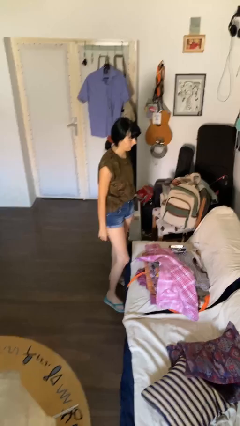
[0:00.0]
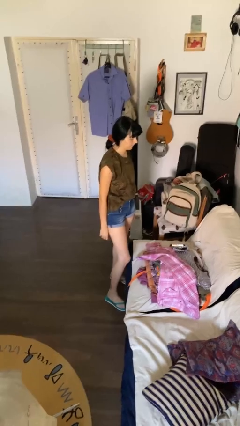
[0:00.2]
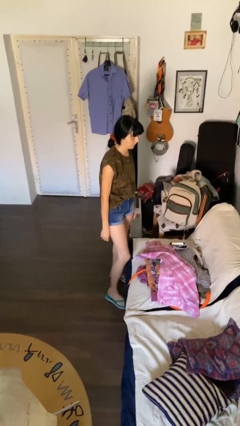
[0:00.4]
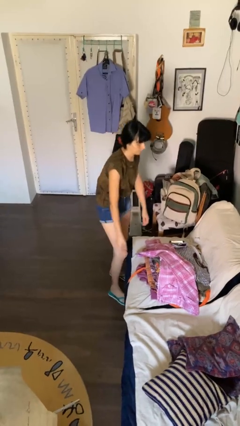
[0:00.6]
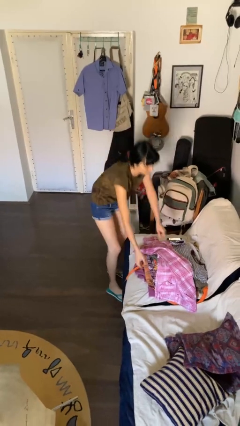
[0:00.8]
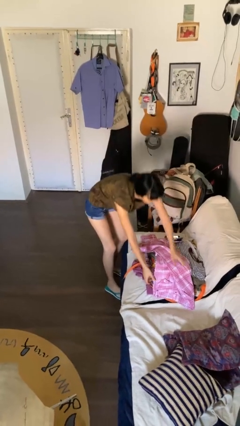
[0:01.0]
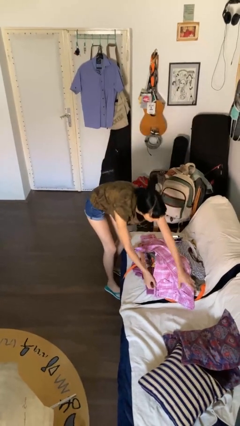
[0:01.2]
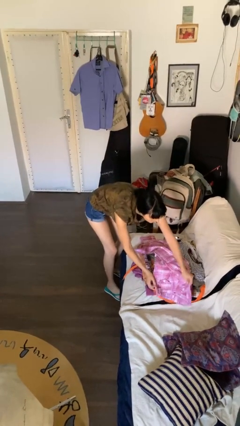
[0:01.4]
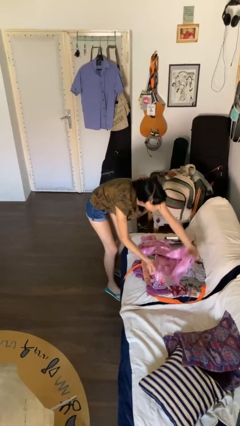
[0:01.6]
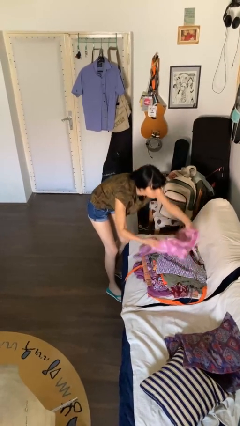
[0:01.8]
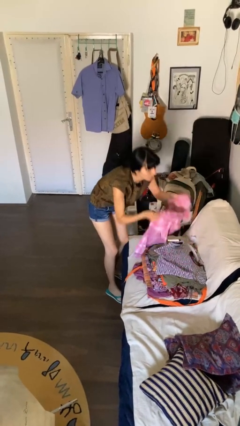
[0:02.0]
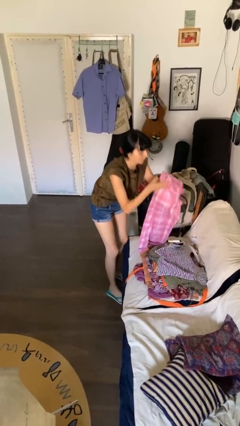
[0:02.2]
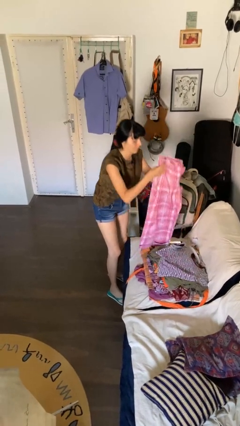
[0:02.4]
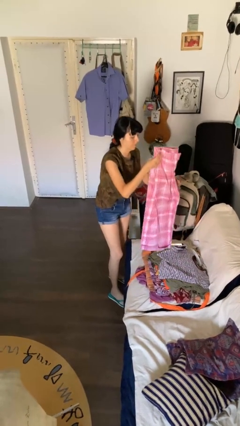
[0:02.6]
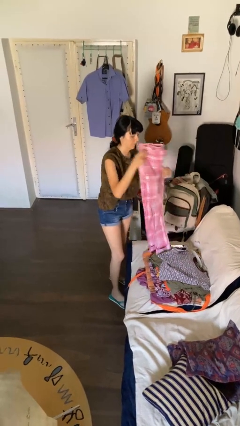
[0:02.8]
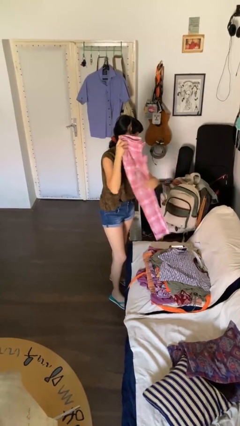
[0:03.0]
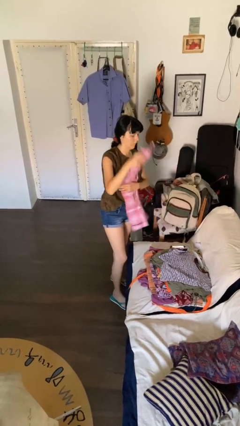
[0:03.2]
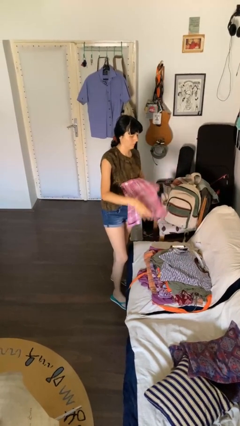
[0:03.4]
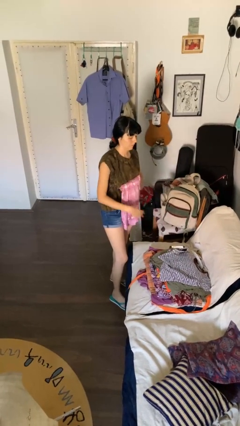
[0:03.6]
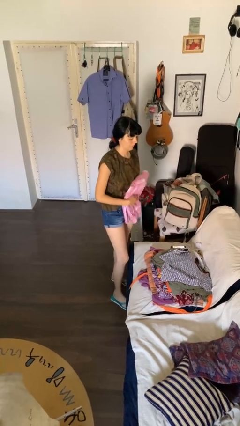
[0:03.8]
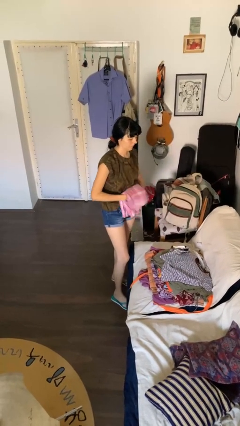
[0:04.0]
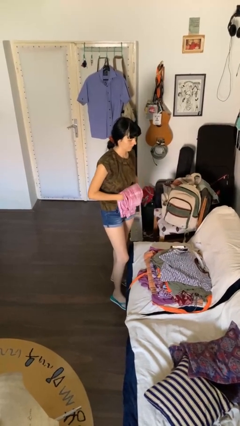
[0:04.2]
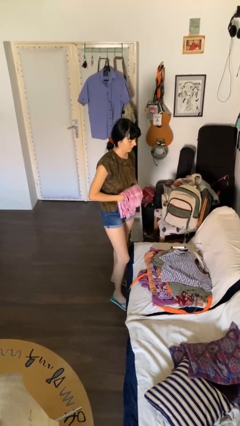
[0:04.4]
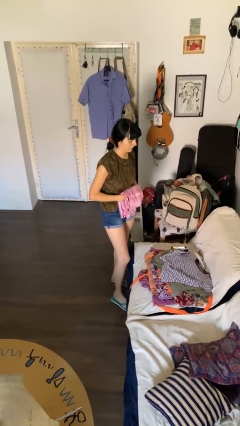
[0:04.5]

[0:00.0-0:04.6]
person folds pants

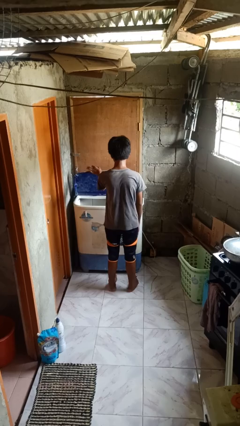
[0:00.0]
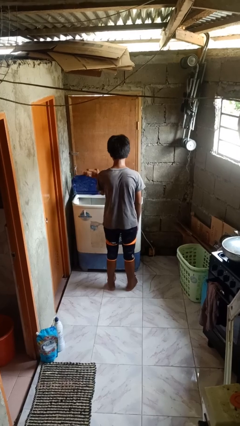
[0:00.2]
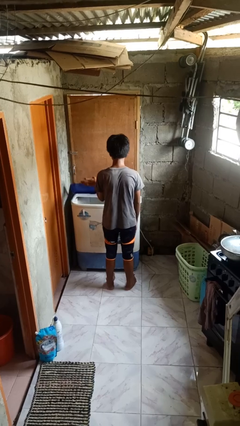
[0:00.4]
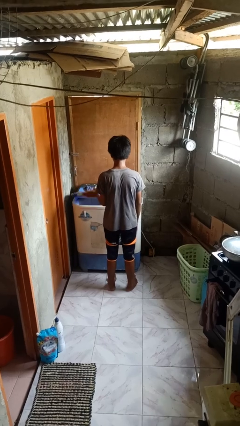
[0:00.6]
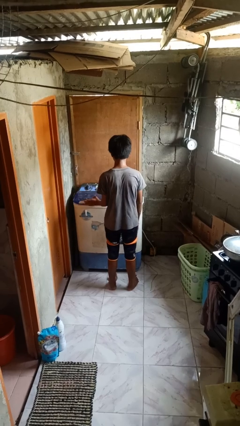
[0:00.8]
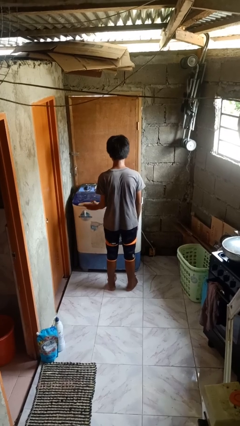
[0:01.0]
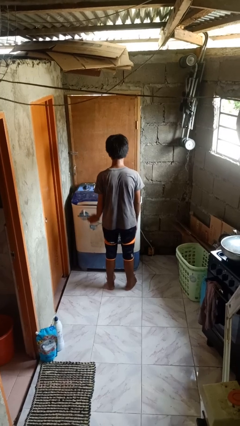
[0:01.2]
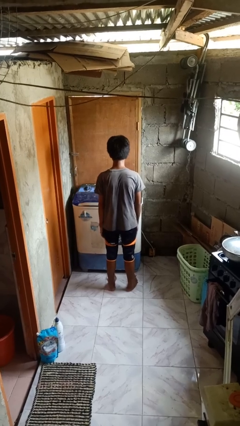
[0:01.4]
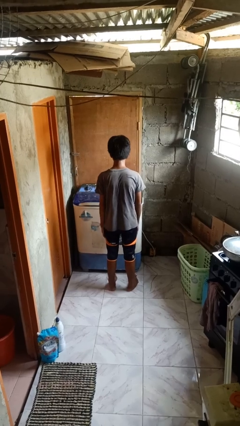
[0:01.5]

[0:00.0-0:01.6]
person closes clothes washer

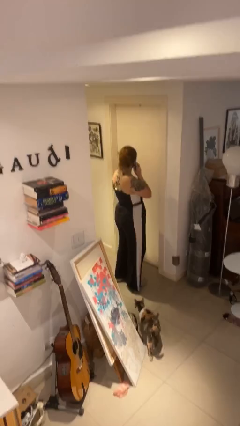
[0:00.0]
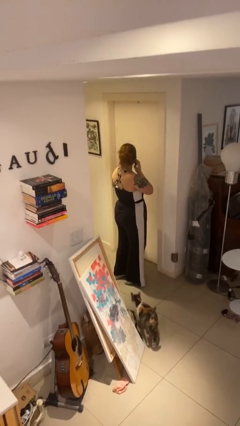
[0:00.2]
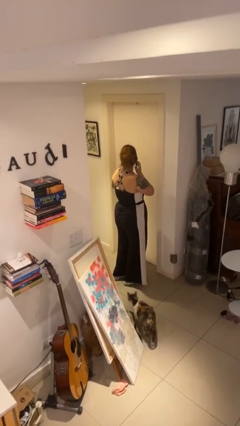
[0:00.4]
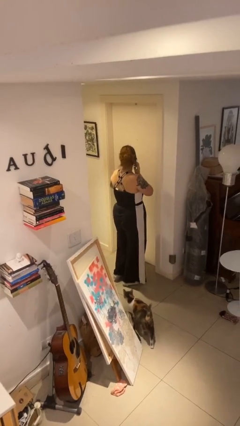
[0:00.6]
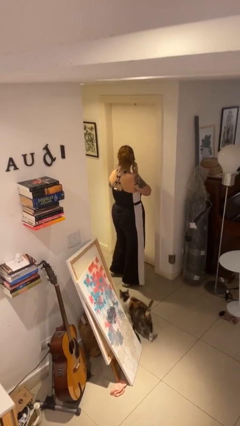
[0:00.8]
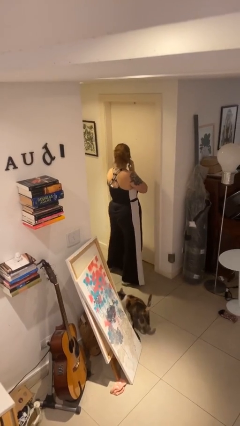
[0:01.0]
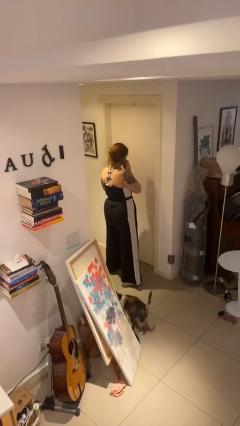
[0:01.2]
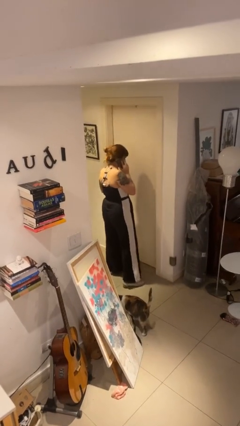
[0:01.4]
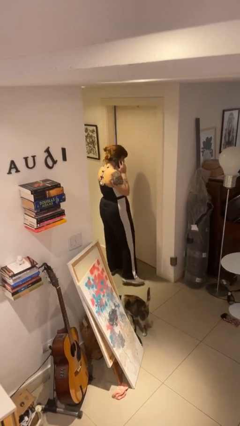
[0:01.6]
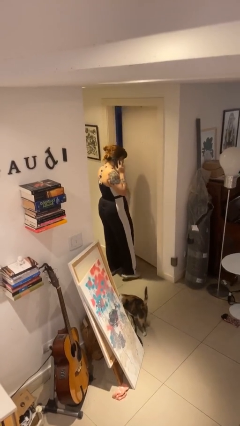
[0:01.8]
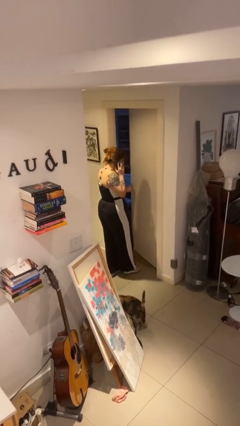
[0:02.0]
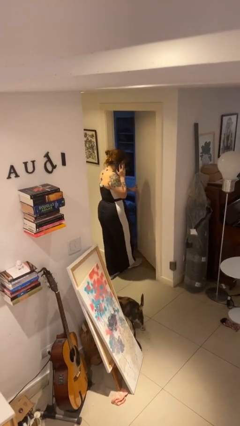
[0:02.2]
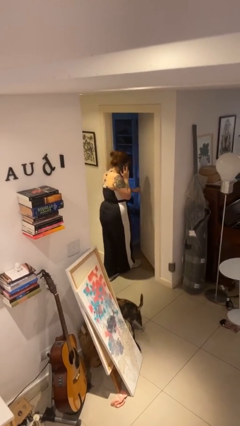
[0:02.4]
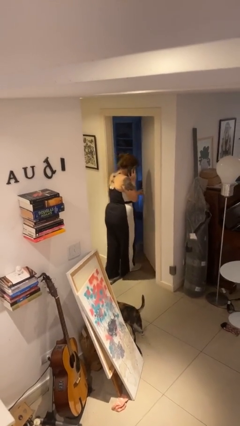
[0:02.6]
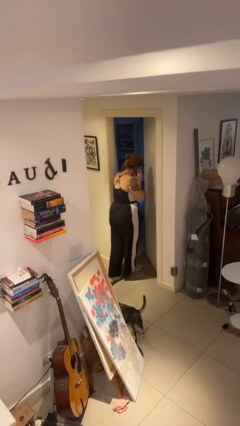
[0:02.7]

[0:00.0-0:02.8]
person opens facility door

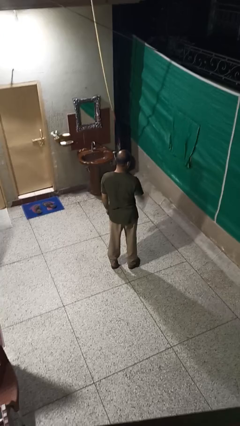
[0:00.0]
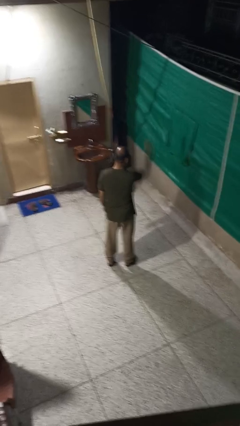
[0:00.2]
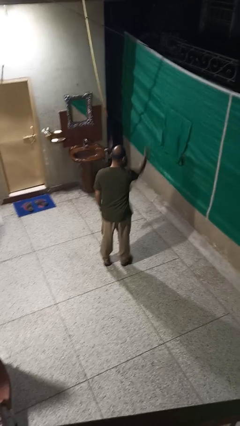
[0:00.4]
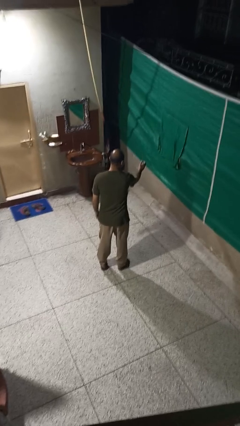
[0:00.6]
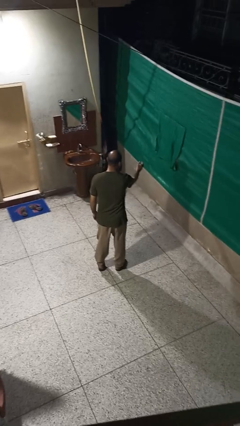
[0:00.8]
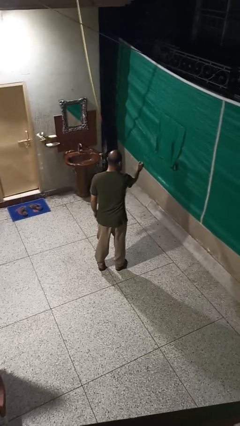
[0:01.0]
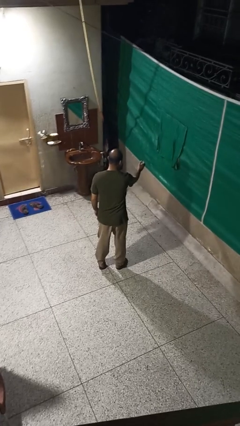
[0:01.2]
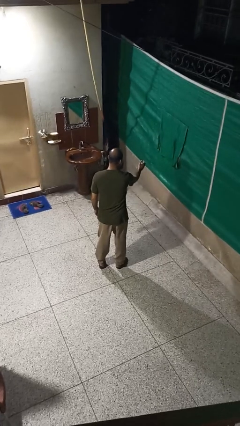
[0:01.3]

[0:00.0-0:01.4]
person karate chop

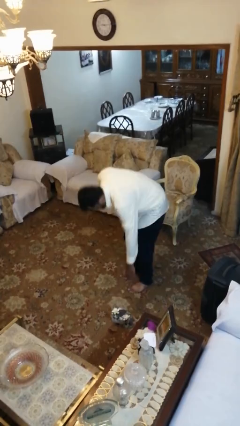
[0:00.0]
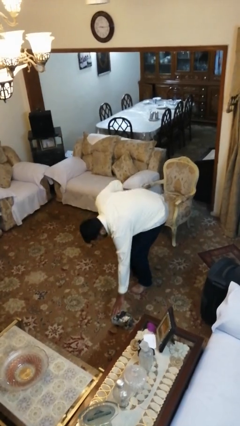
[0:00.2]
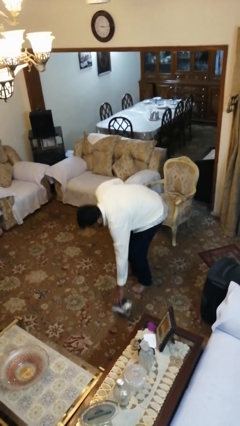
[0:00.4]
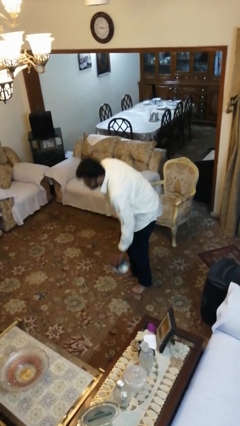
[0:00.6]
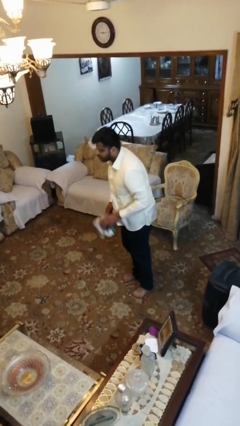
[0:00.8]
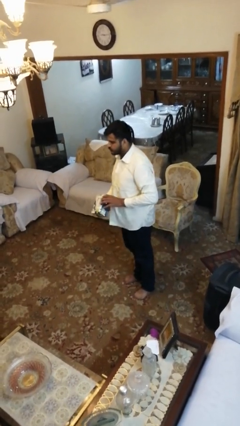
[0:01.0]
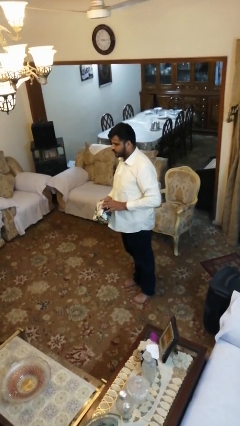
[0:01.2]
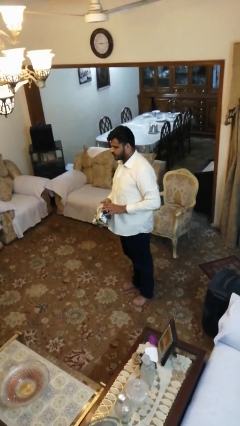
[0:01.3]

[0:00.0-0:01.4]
person picks up object from floor

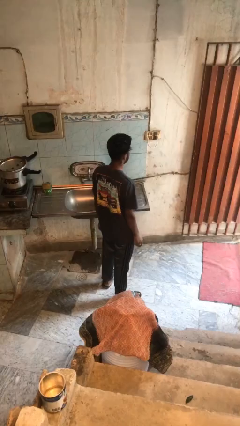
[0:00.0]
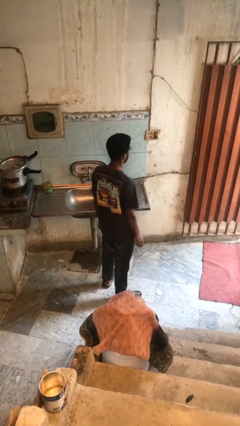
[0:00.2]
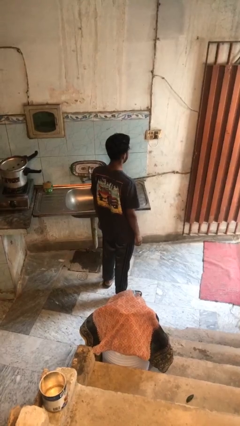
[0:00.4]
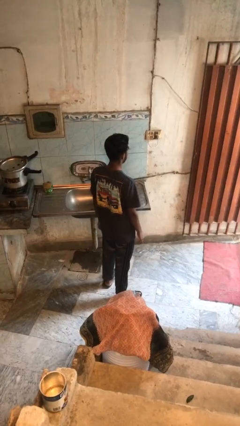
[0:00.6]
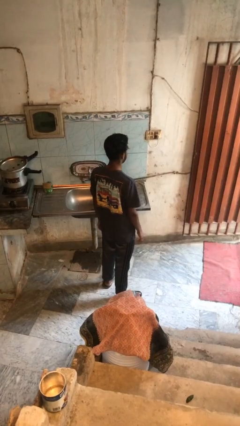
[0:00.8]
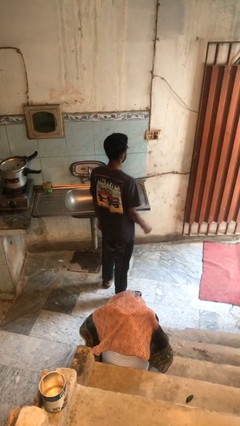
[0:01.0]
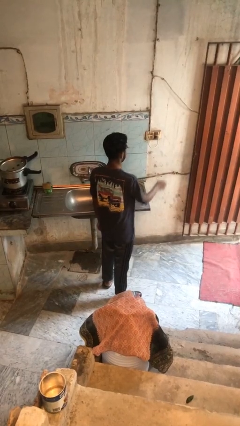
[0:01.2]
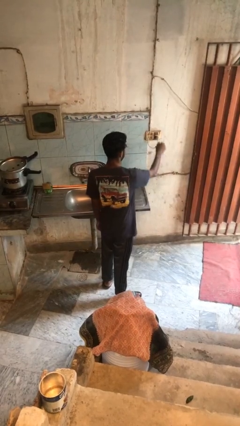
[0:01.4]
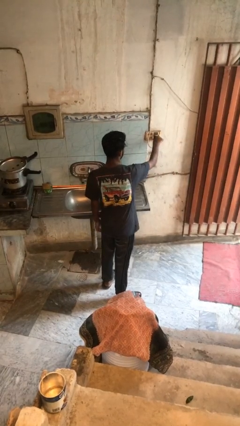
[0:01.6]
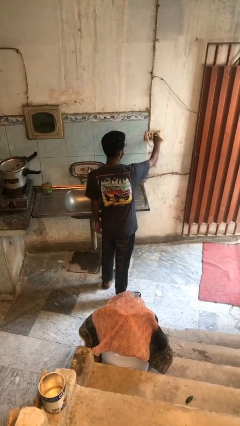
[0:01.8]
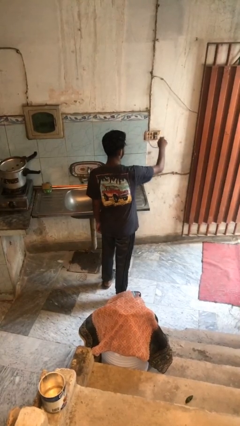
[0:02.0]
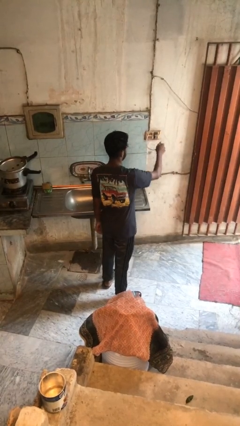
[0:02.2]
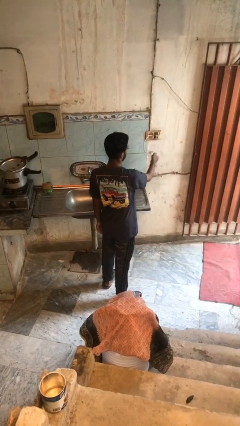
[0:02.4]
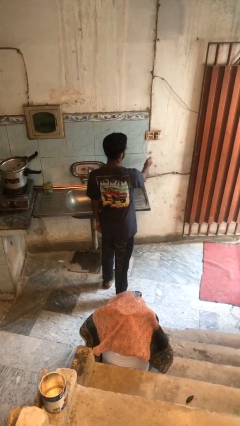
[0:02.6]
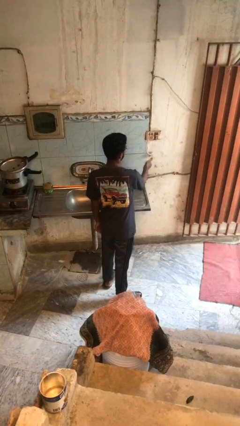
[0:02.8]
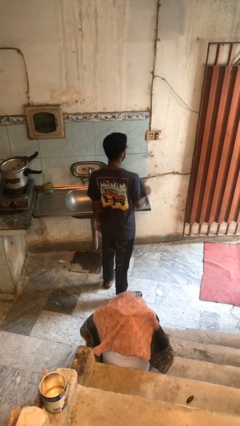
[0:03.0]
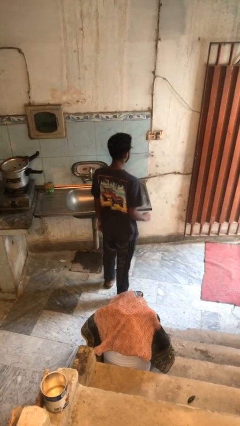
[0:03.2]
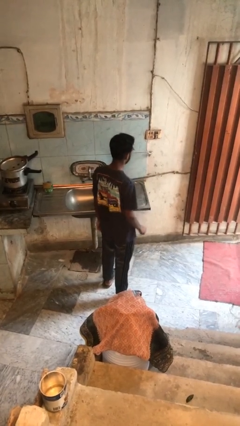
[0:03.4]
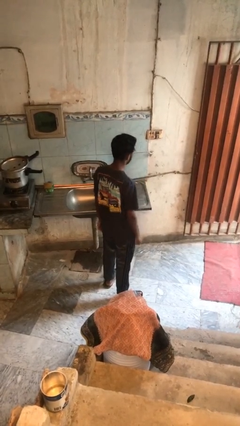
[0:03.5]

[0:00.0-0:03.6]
person unplugs from electrical socket

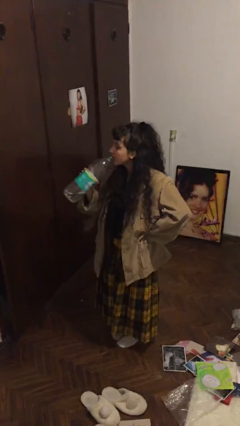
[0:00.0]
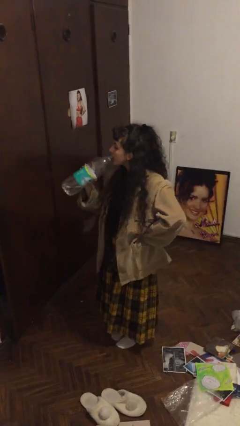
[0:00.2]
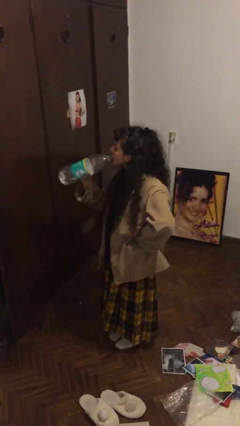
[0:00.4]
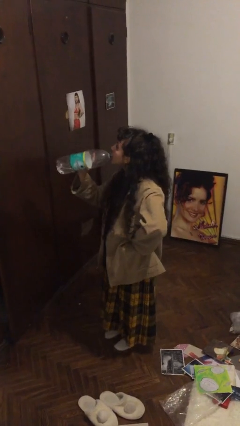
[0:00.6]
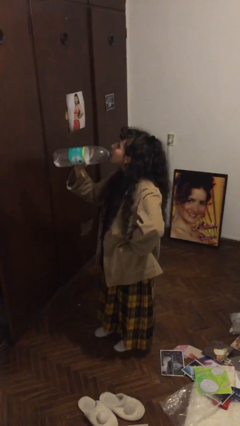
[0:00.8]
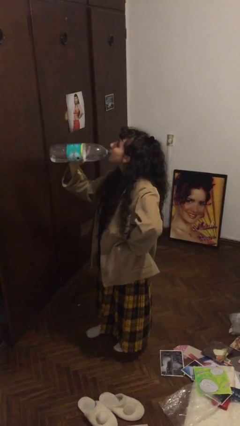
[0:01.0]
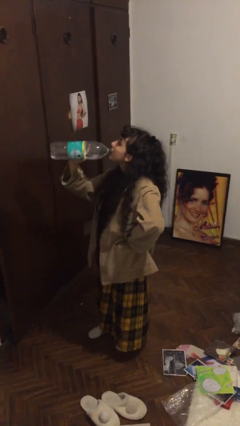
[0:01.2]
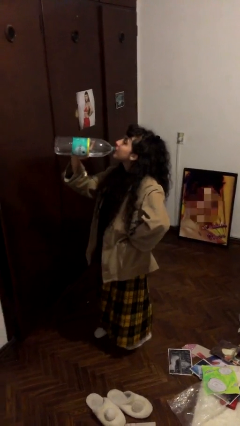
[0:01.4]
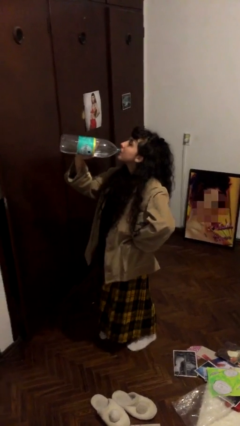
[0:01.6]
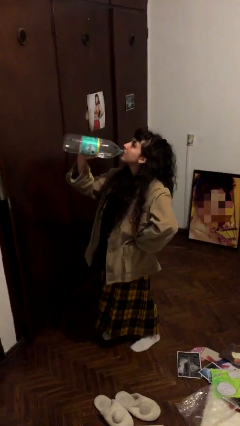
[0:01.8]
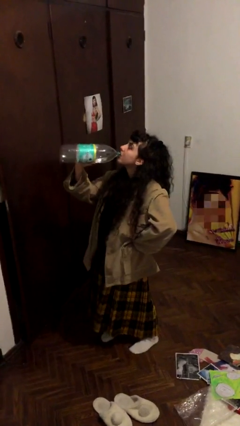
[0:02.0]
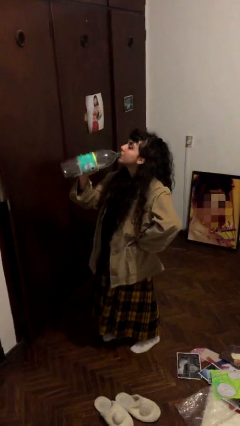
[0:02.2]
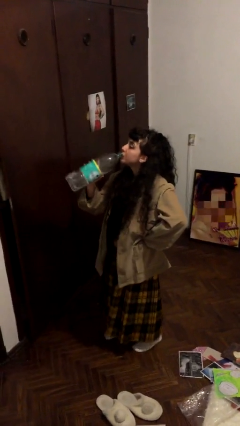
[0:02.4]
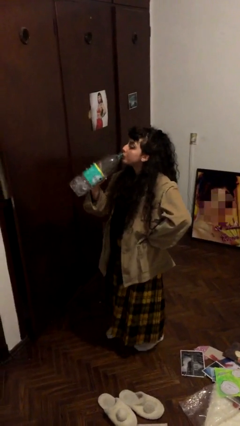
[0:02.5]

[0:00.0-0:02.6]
person drinks from bottle
